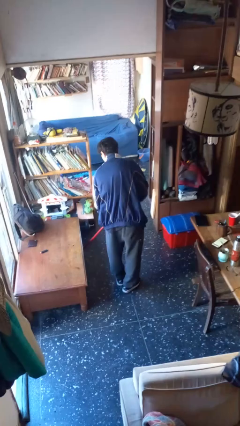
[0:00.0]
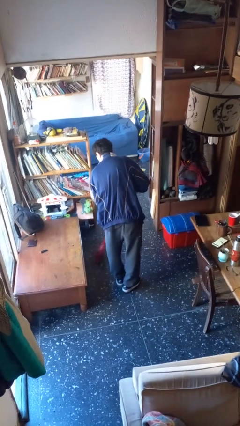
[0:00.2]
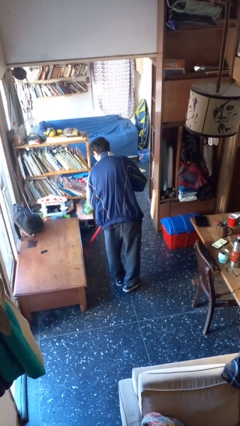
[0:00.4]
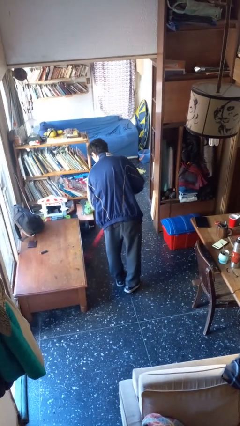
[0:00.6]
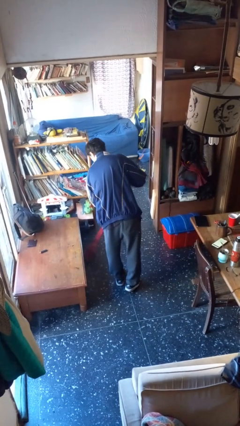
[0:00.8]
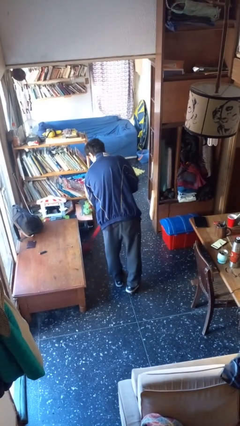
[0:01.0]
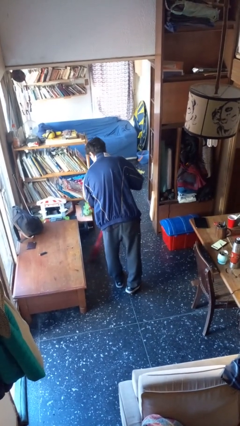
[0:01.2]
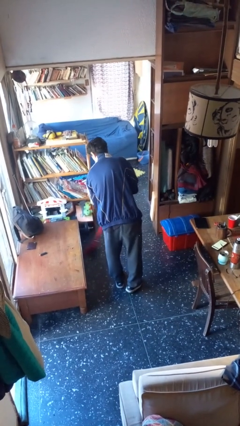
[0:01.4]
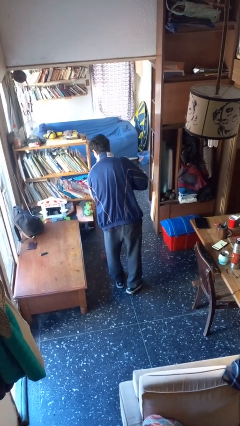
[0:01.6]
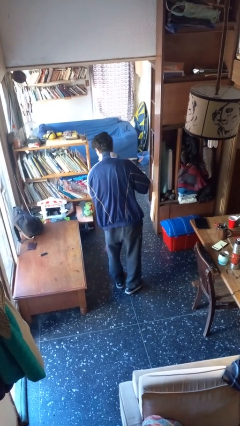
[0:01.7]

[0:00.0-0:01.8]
person sweeps floor

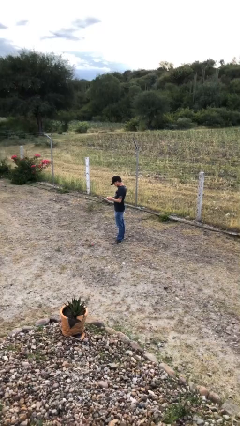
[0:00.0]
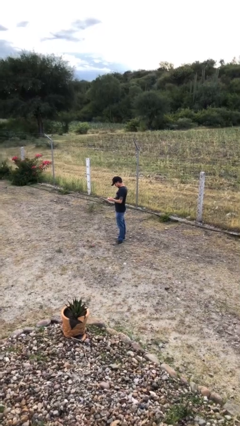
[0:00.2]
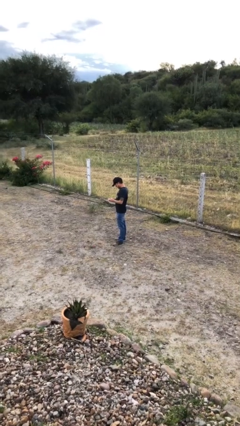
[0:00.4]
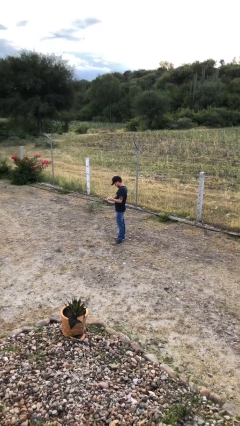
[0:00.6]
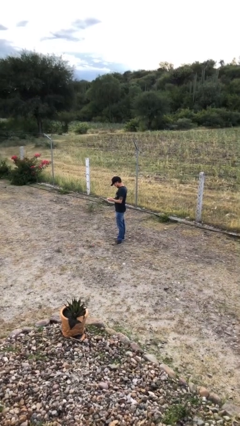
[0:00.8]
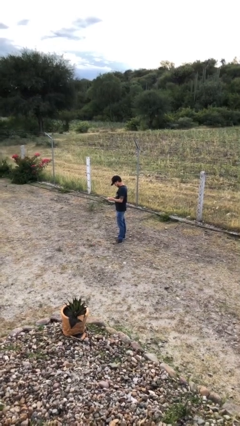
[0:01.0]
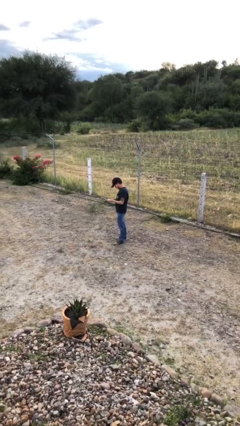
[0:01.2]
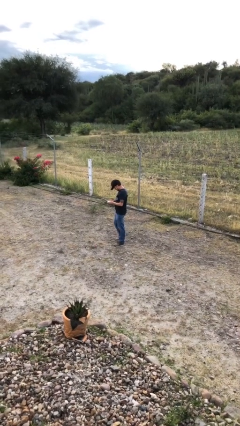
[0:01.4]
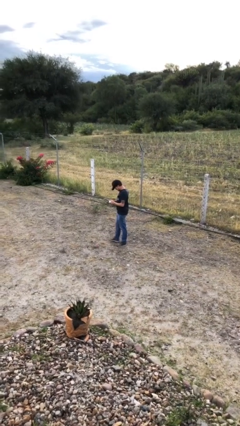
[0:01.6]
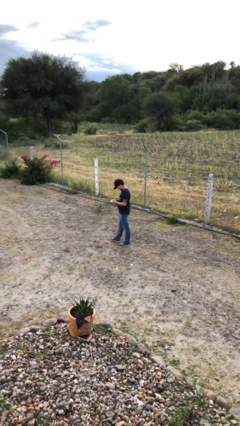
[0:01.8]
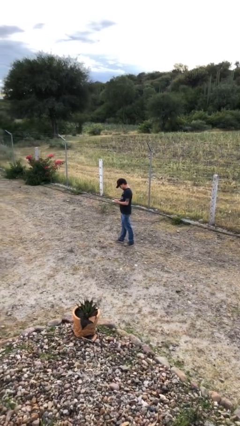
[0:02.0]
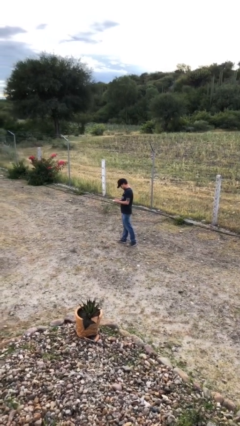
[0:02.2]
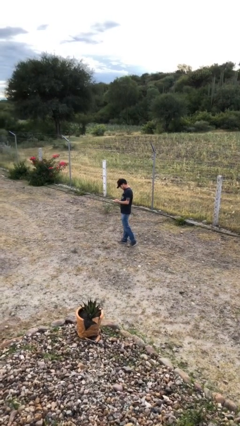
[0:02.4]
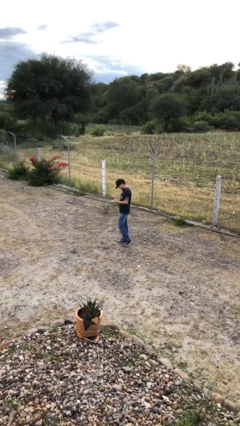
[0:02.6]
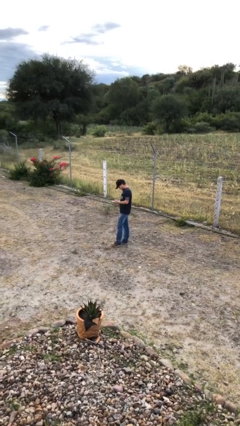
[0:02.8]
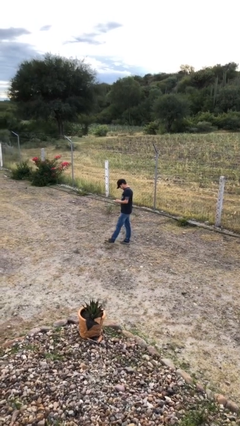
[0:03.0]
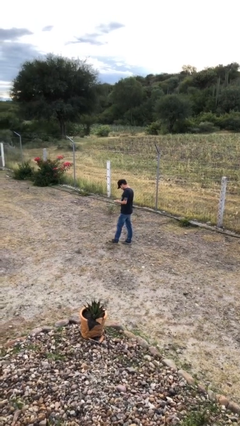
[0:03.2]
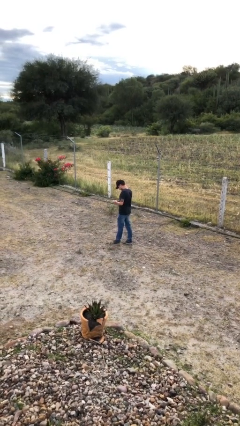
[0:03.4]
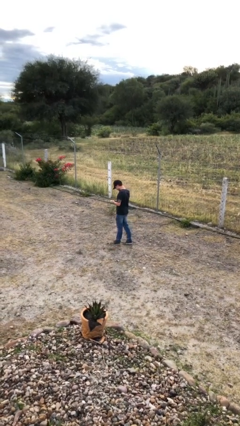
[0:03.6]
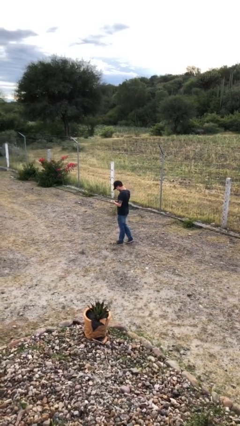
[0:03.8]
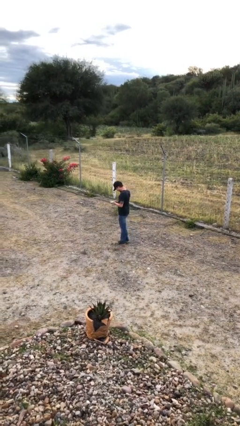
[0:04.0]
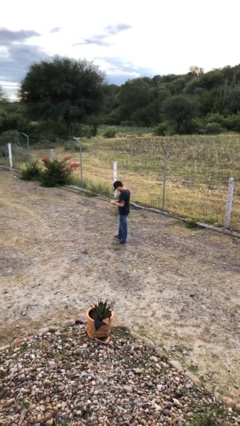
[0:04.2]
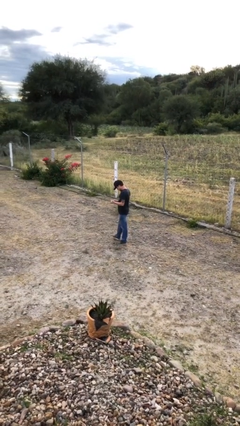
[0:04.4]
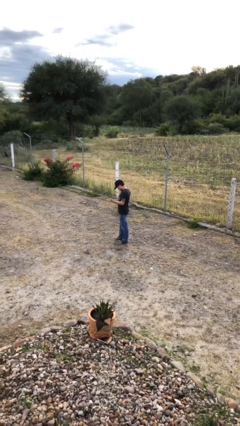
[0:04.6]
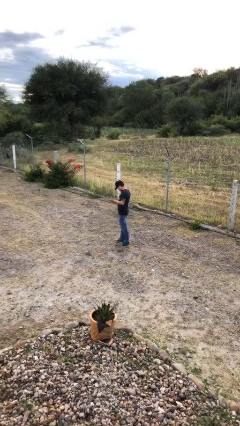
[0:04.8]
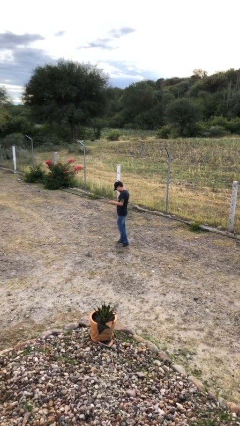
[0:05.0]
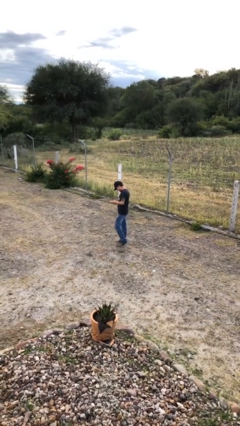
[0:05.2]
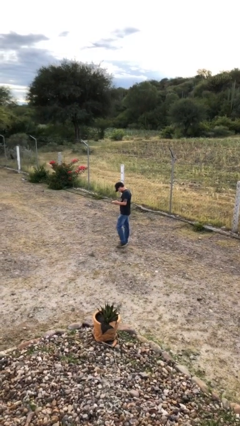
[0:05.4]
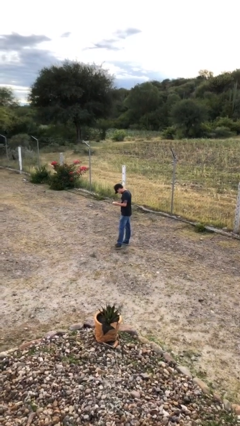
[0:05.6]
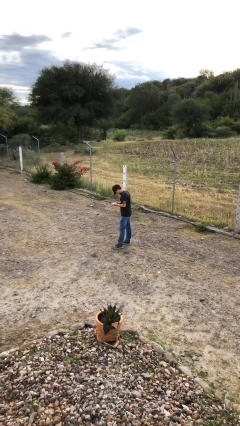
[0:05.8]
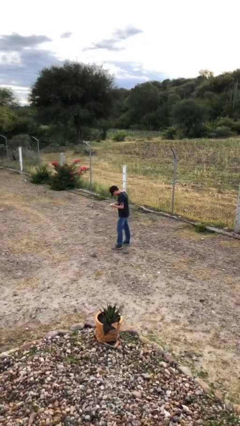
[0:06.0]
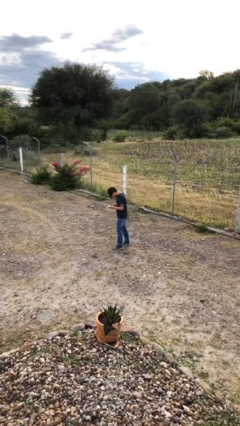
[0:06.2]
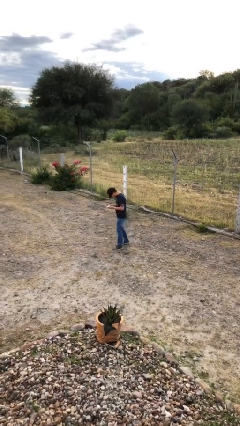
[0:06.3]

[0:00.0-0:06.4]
person texts on phone

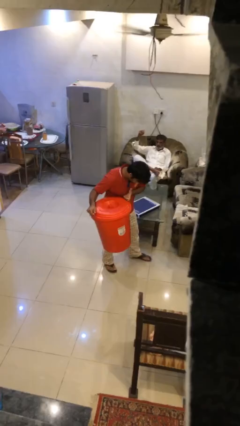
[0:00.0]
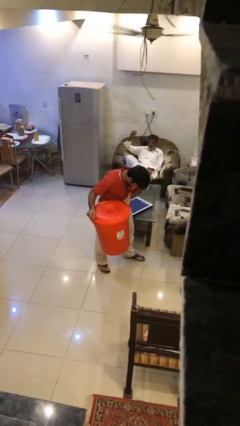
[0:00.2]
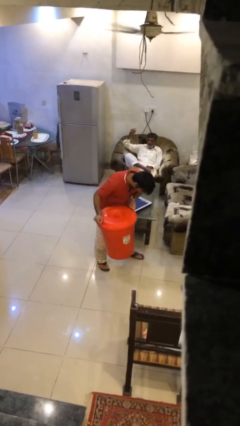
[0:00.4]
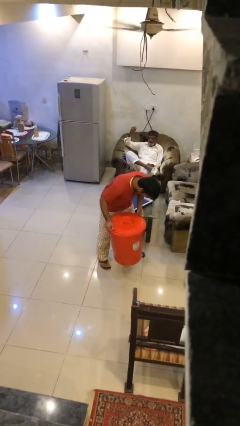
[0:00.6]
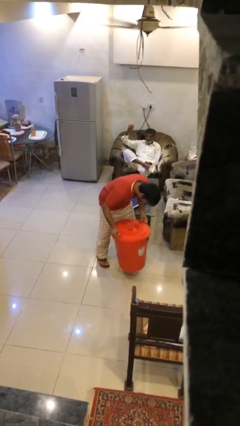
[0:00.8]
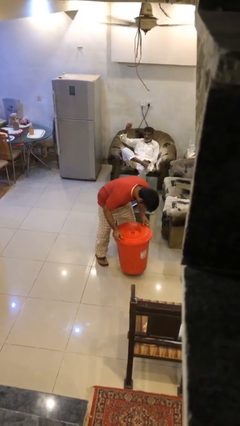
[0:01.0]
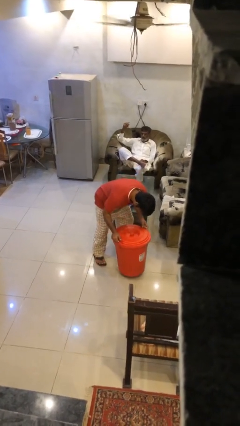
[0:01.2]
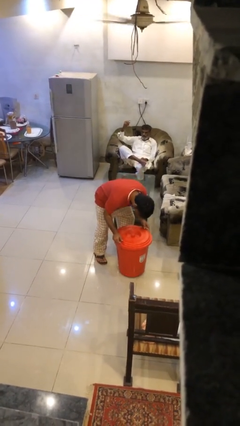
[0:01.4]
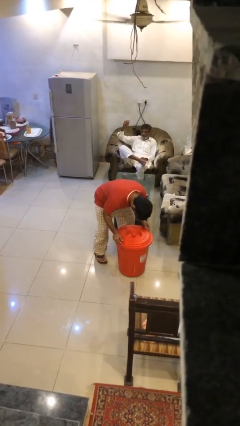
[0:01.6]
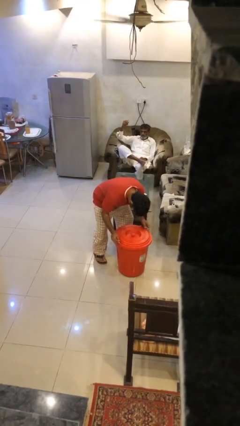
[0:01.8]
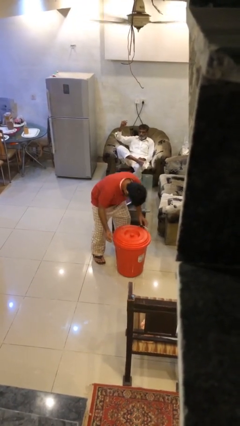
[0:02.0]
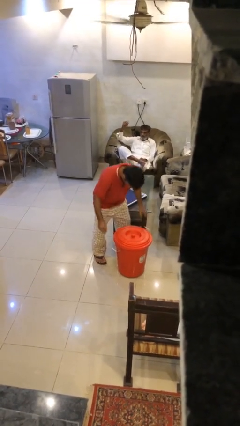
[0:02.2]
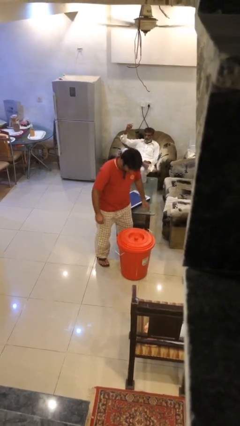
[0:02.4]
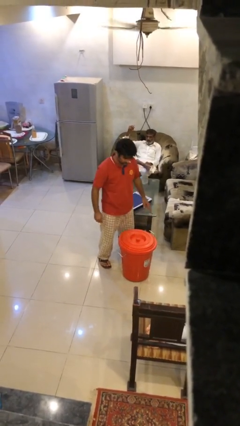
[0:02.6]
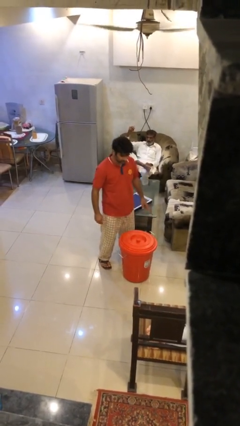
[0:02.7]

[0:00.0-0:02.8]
person puts down object on floor

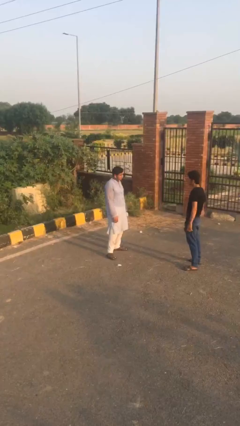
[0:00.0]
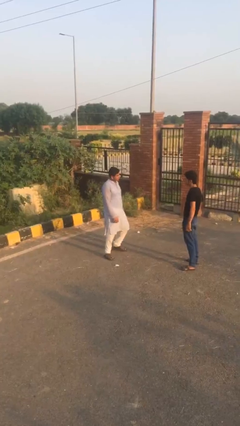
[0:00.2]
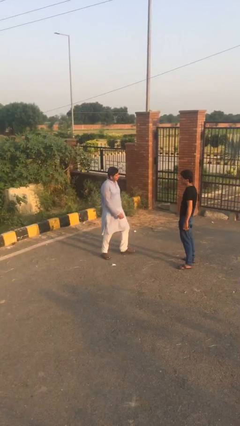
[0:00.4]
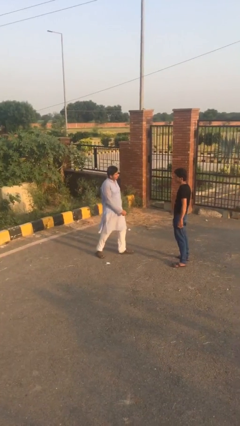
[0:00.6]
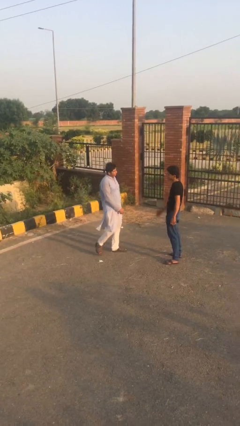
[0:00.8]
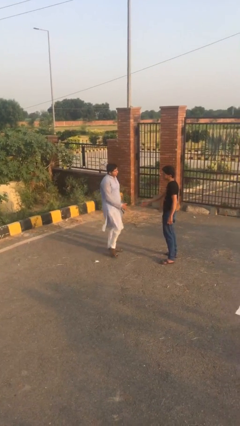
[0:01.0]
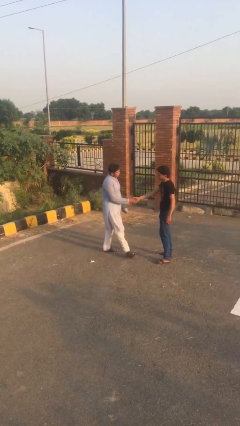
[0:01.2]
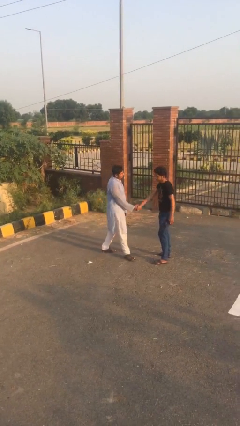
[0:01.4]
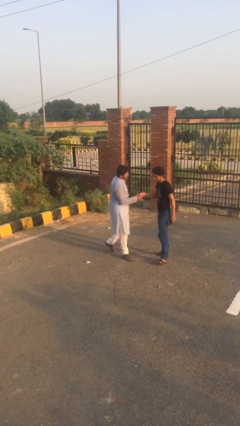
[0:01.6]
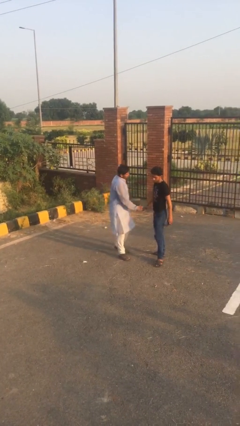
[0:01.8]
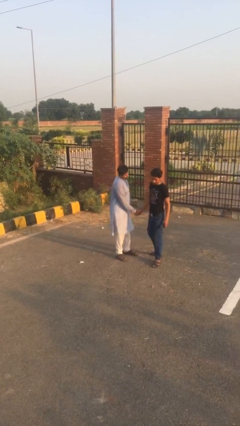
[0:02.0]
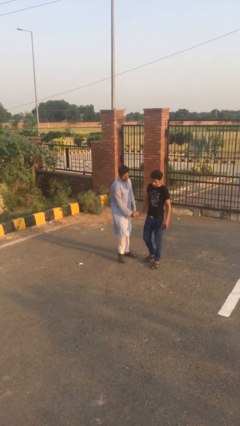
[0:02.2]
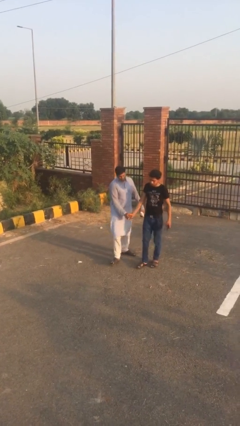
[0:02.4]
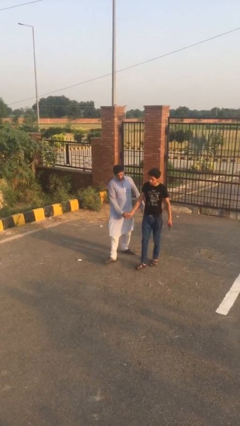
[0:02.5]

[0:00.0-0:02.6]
person shakes hand

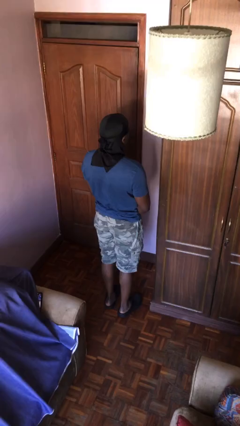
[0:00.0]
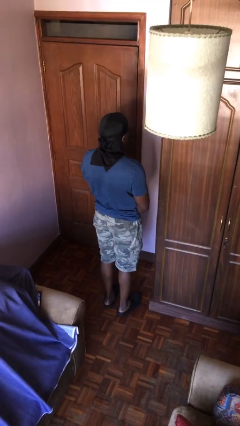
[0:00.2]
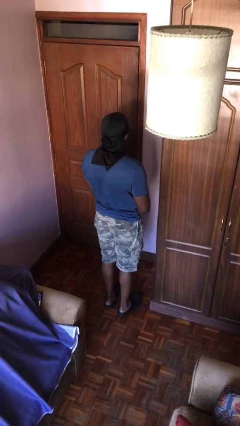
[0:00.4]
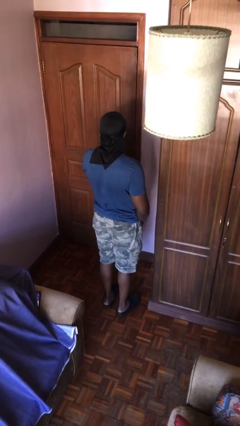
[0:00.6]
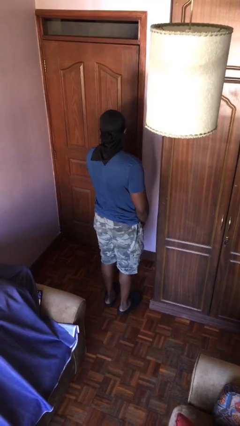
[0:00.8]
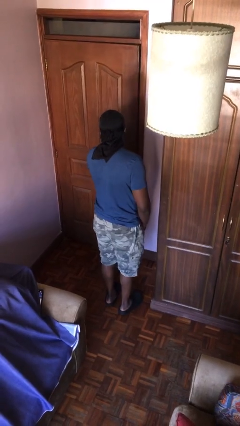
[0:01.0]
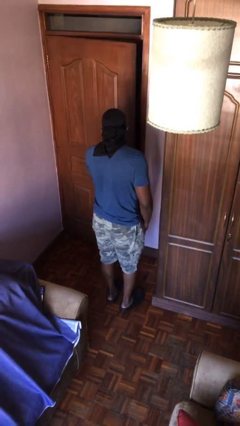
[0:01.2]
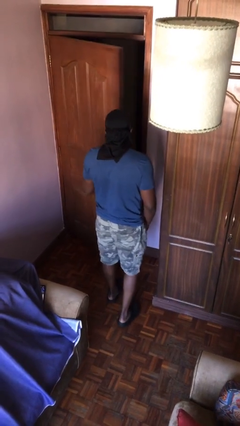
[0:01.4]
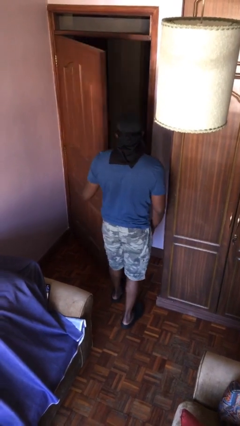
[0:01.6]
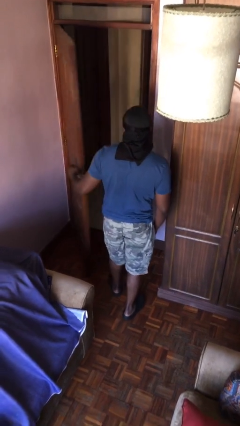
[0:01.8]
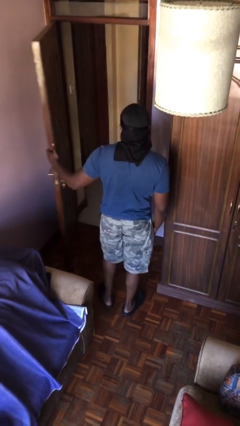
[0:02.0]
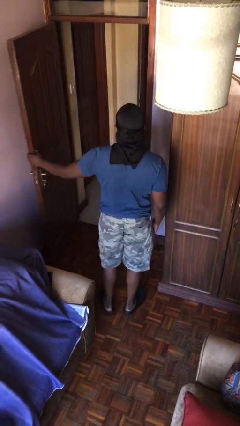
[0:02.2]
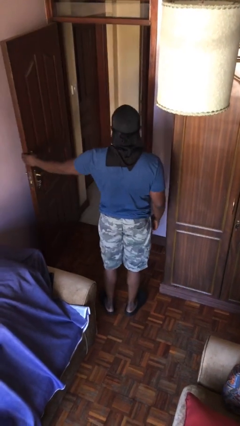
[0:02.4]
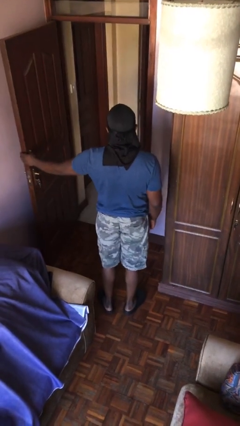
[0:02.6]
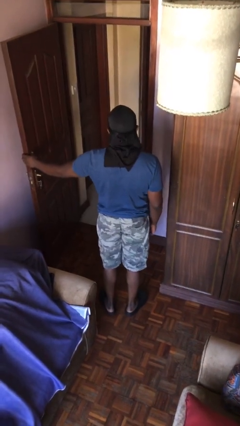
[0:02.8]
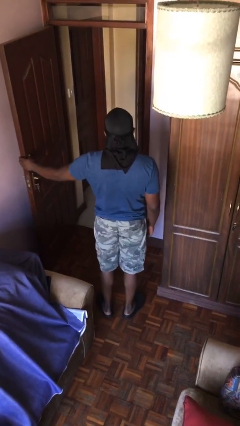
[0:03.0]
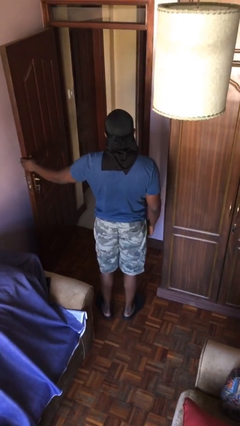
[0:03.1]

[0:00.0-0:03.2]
person opens facility door

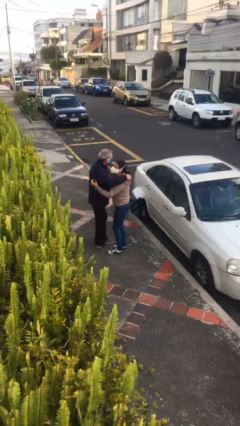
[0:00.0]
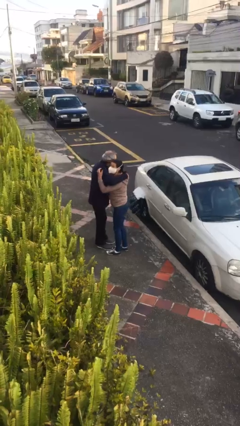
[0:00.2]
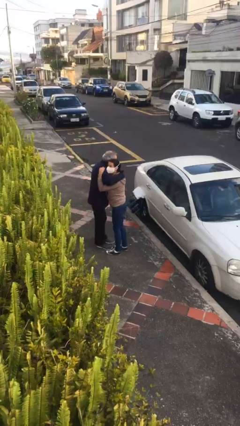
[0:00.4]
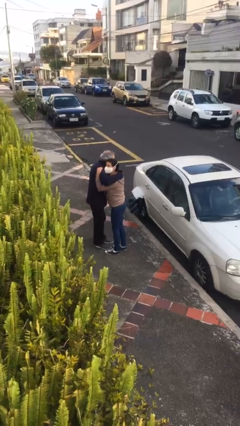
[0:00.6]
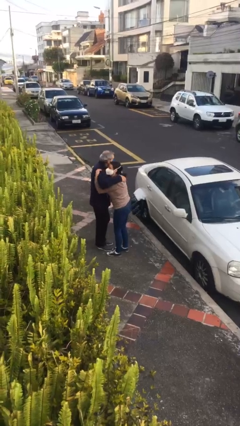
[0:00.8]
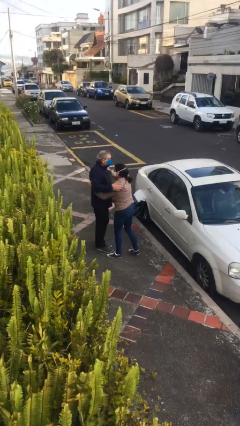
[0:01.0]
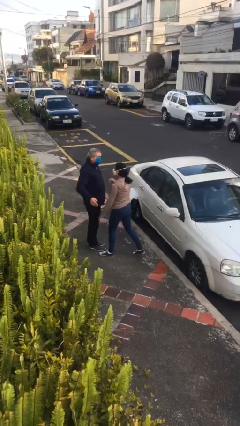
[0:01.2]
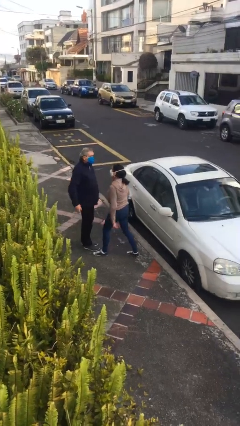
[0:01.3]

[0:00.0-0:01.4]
person embraces person
